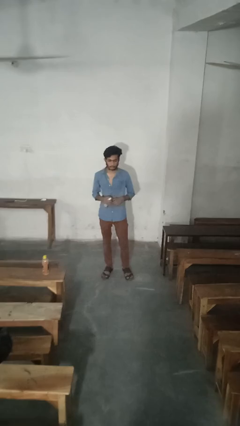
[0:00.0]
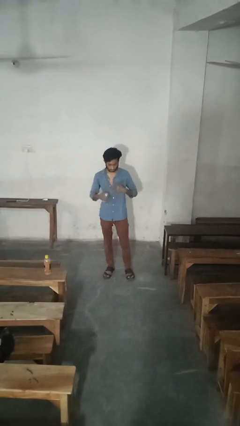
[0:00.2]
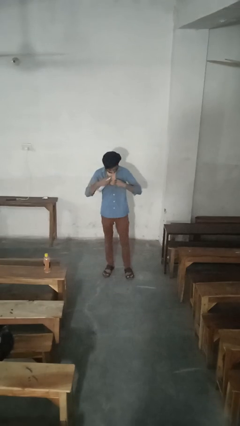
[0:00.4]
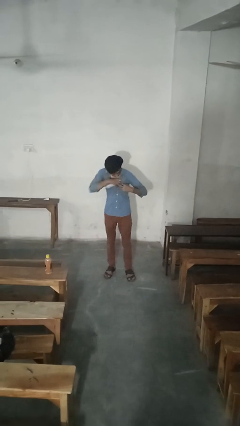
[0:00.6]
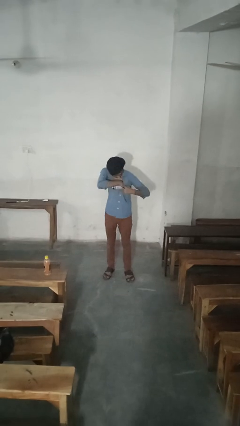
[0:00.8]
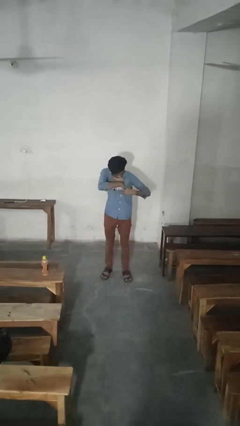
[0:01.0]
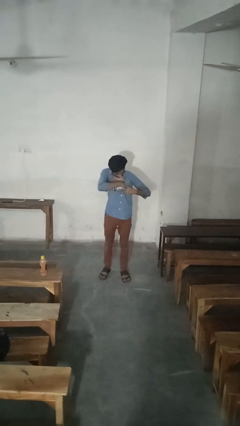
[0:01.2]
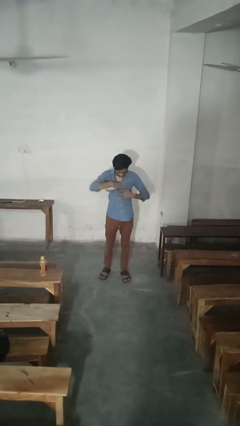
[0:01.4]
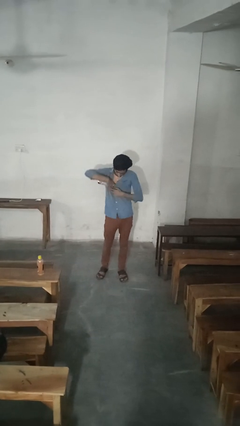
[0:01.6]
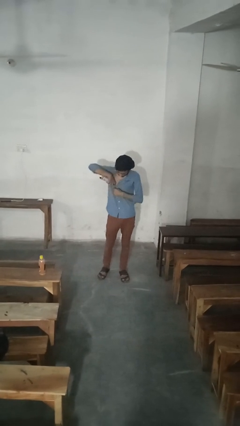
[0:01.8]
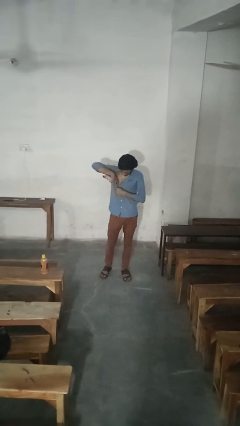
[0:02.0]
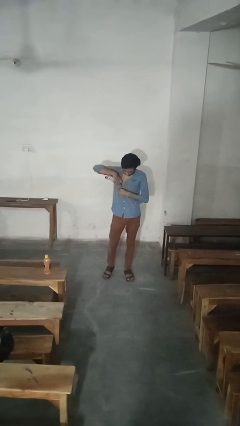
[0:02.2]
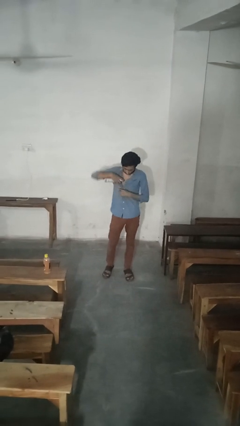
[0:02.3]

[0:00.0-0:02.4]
person applies deodorant

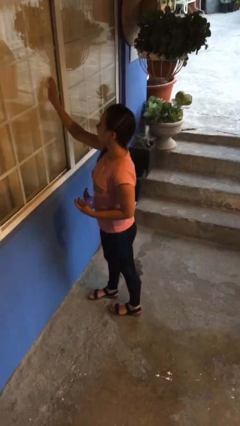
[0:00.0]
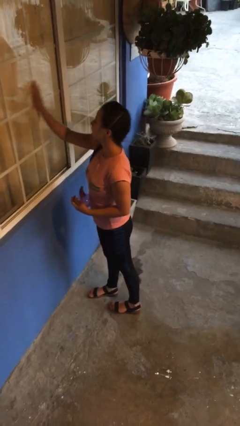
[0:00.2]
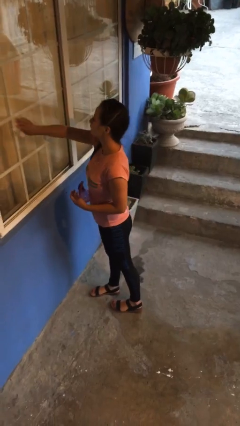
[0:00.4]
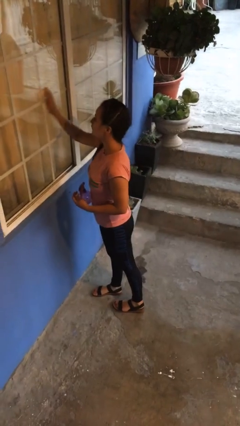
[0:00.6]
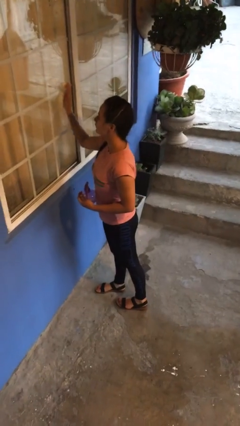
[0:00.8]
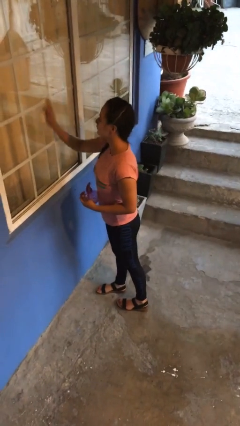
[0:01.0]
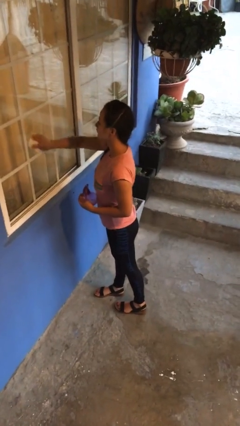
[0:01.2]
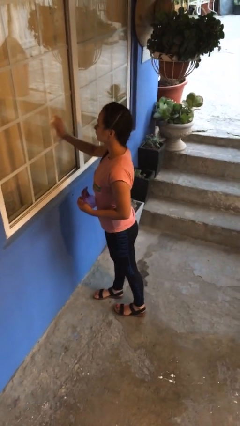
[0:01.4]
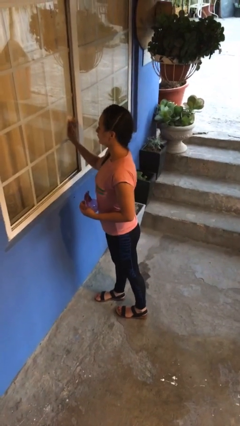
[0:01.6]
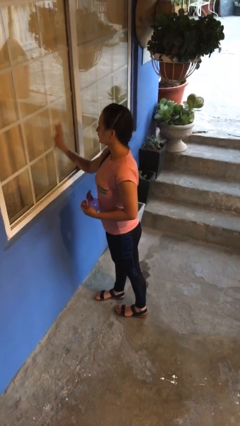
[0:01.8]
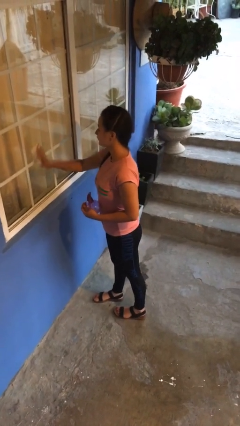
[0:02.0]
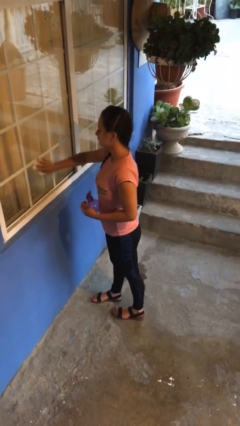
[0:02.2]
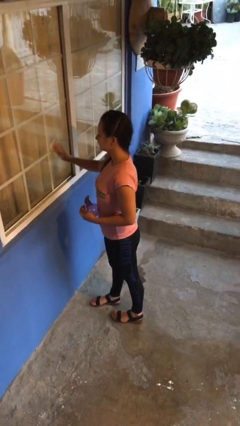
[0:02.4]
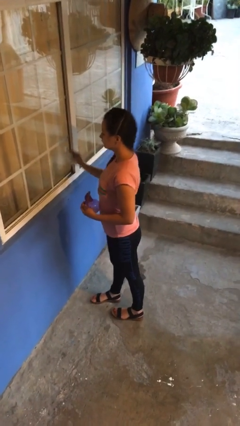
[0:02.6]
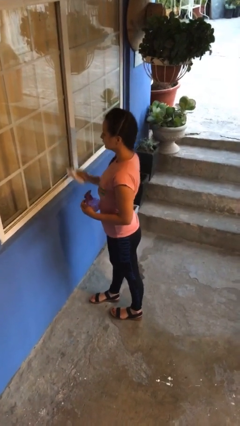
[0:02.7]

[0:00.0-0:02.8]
person washes window

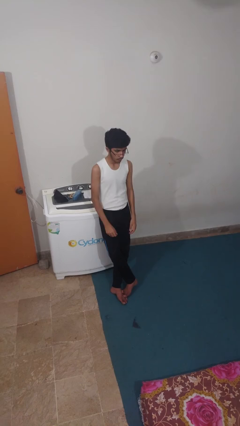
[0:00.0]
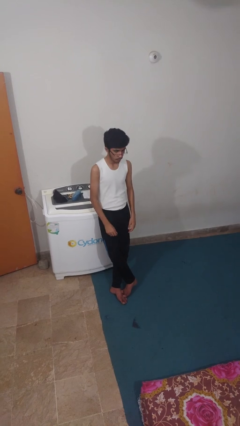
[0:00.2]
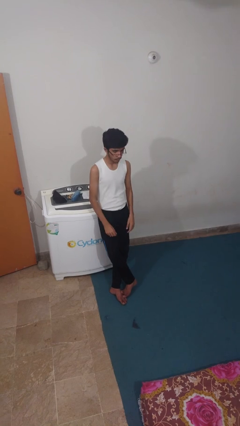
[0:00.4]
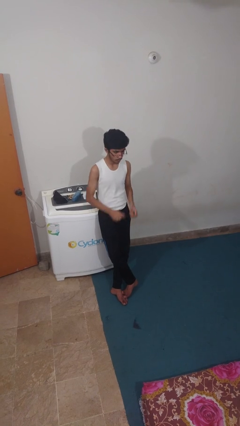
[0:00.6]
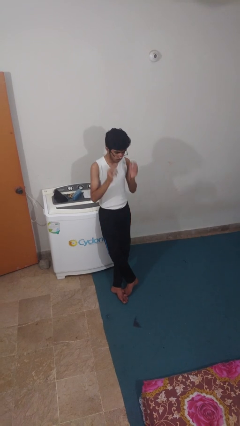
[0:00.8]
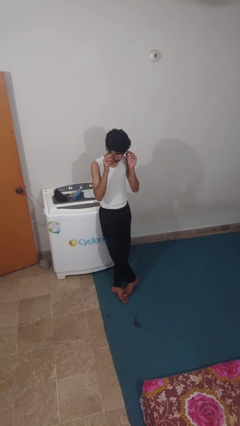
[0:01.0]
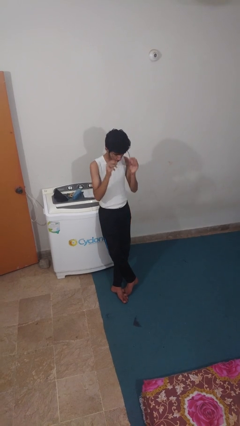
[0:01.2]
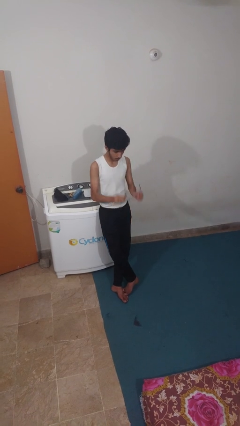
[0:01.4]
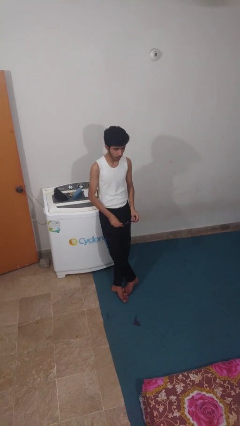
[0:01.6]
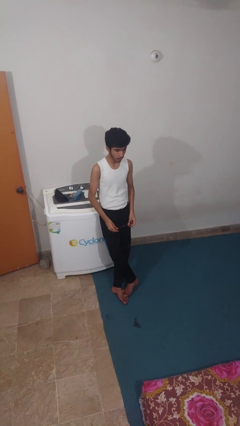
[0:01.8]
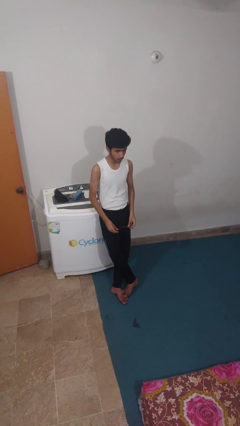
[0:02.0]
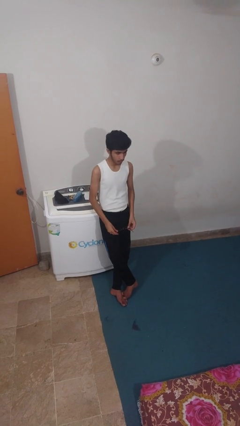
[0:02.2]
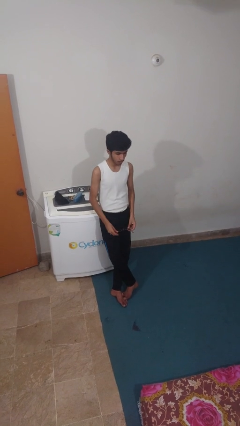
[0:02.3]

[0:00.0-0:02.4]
person takes off glasses

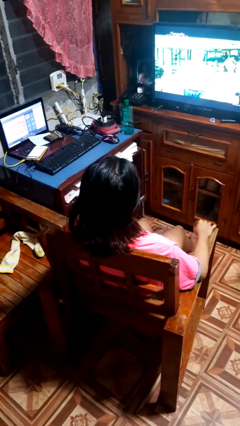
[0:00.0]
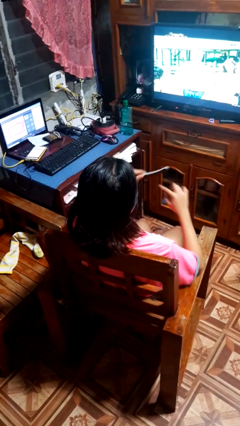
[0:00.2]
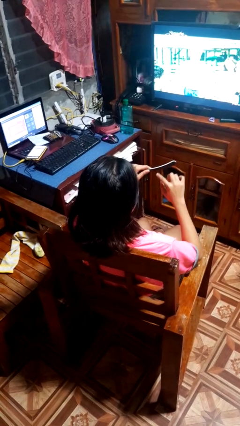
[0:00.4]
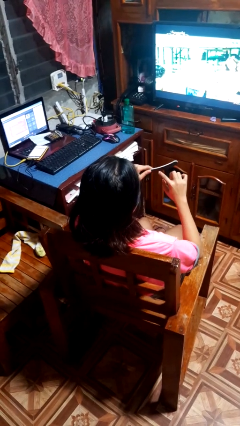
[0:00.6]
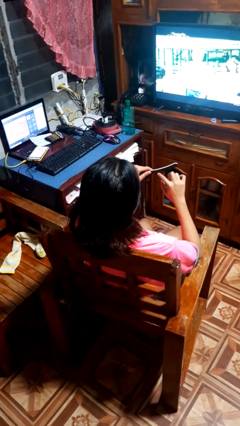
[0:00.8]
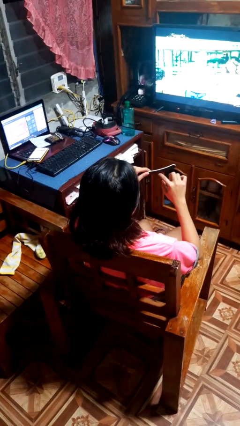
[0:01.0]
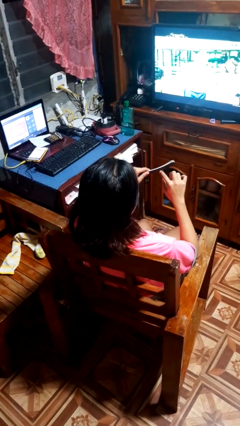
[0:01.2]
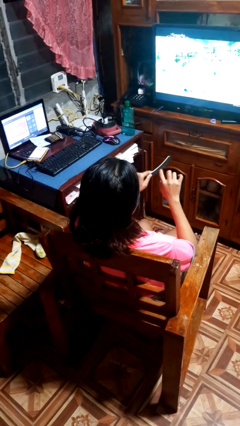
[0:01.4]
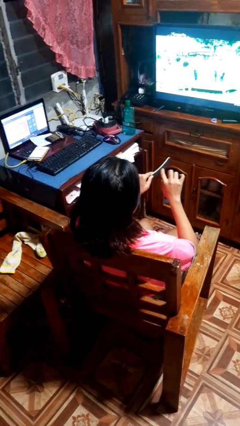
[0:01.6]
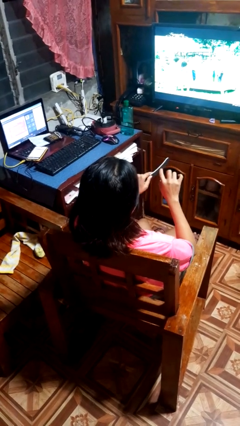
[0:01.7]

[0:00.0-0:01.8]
person files fingernails

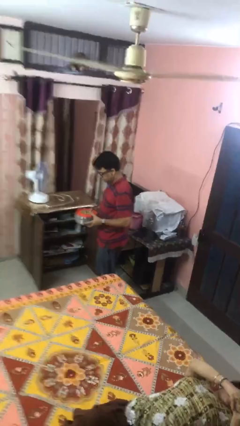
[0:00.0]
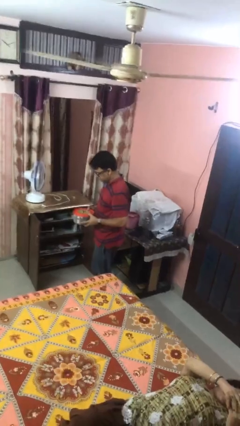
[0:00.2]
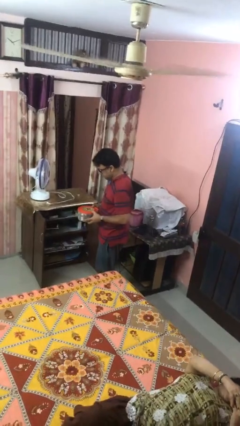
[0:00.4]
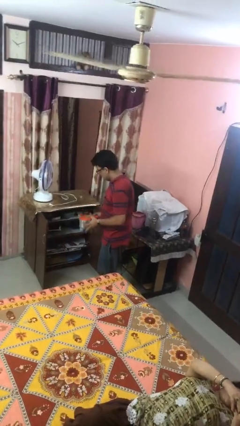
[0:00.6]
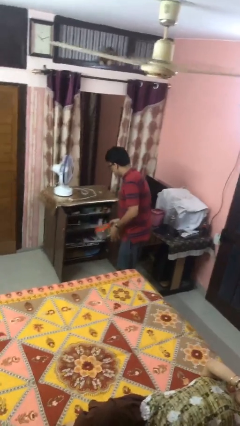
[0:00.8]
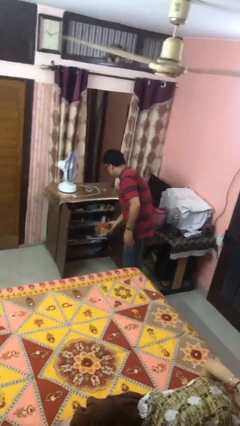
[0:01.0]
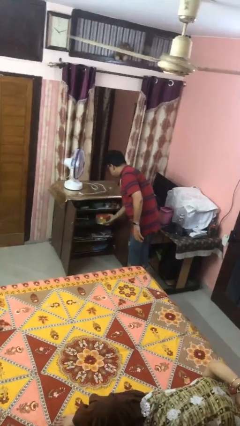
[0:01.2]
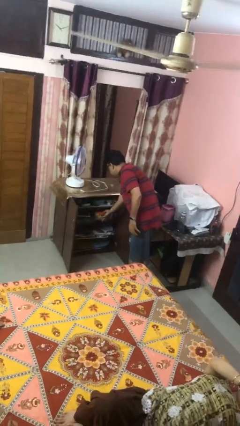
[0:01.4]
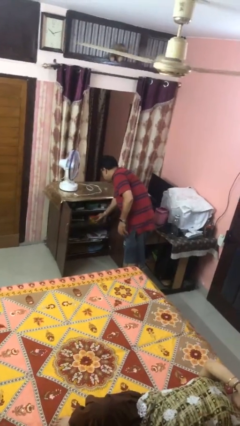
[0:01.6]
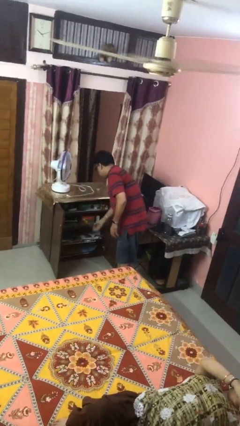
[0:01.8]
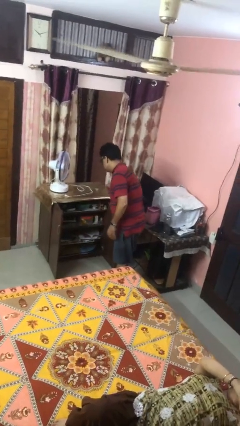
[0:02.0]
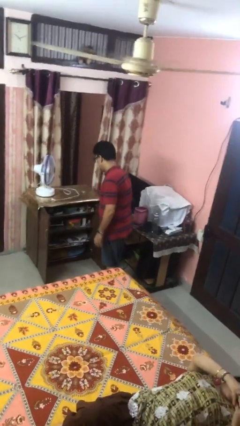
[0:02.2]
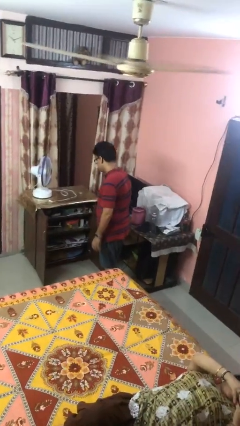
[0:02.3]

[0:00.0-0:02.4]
person puts down object into cabinet

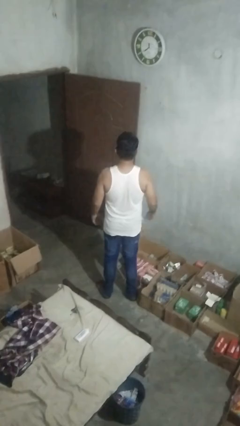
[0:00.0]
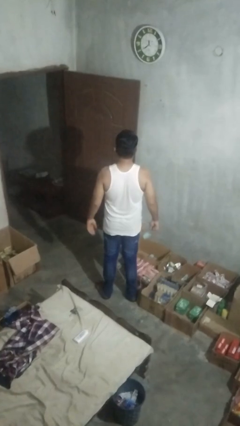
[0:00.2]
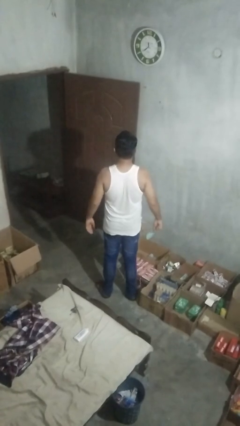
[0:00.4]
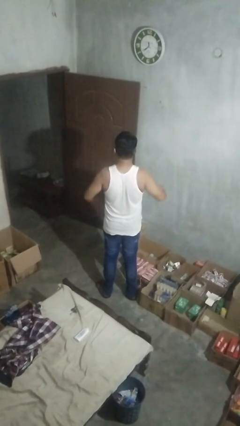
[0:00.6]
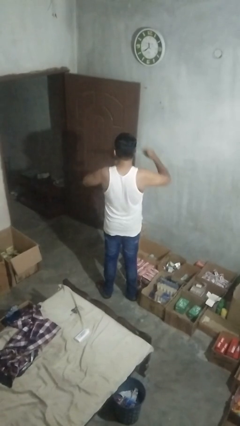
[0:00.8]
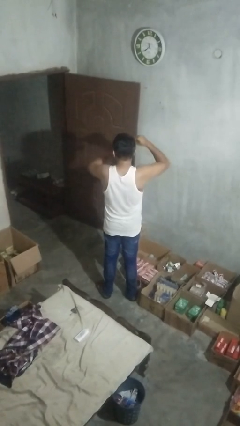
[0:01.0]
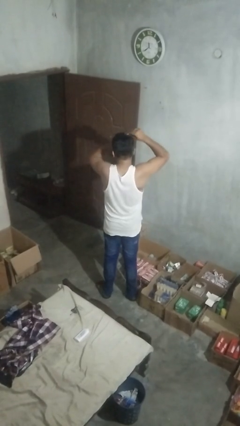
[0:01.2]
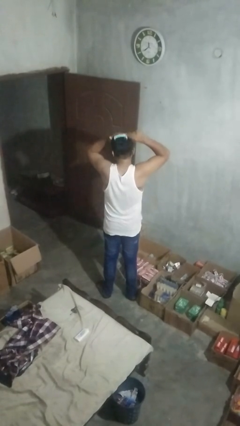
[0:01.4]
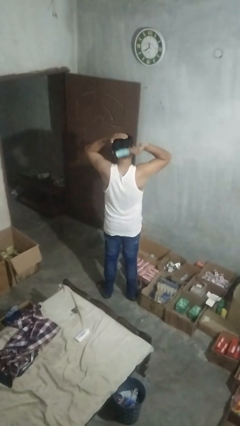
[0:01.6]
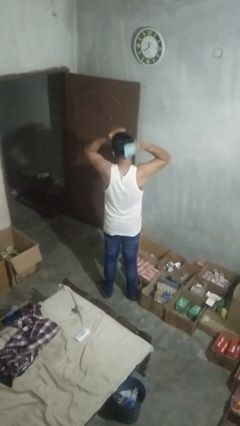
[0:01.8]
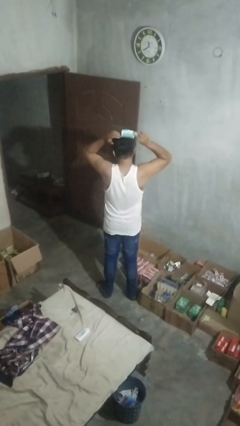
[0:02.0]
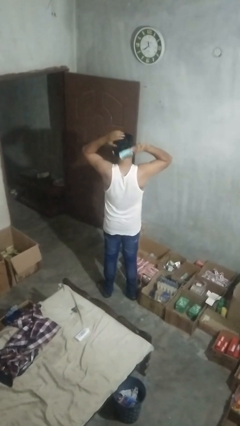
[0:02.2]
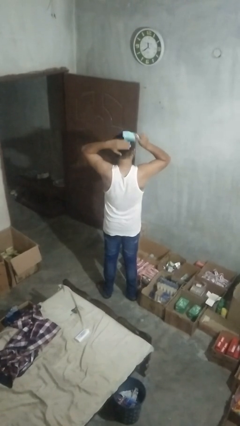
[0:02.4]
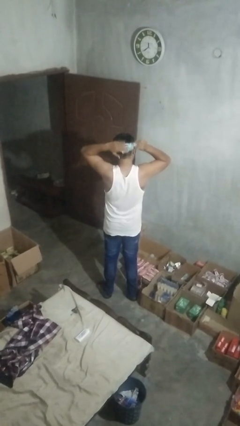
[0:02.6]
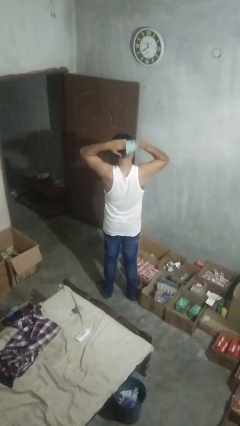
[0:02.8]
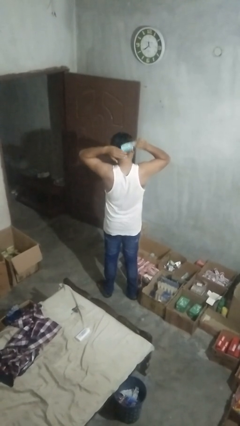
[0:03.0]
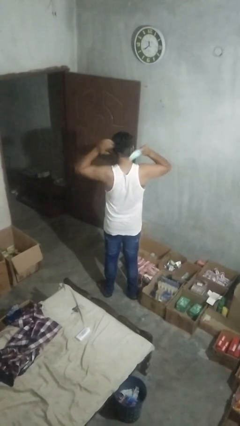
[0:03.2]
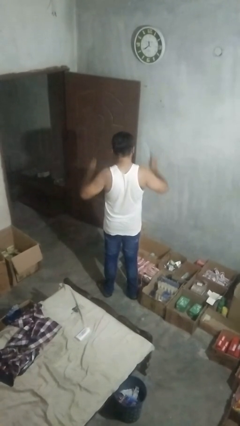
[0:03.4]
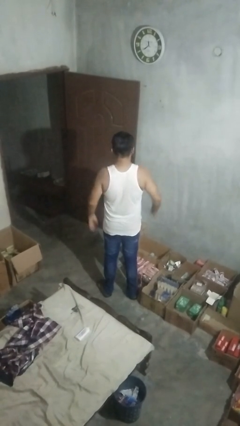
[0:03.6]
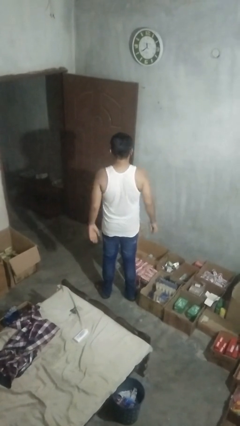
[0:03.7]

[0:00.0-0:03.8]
person brushes hair

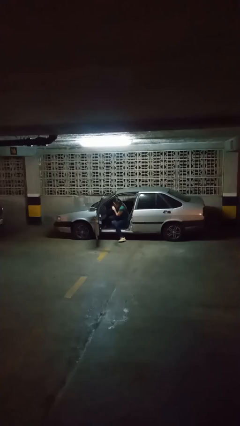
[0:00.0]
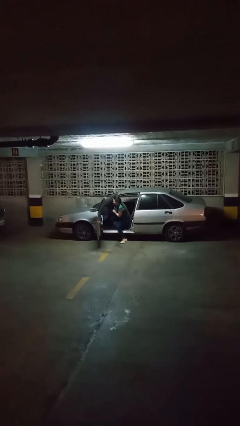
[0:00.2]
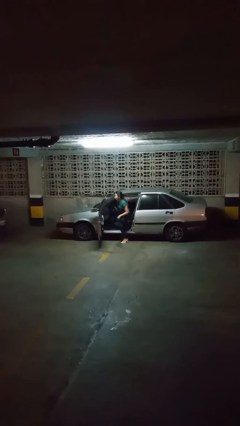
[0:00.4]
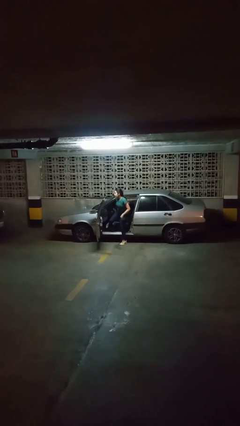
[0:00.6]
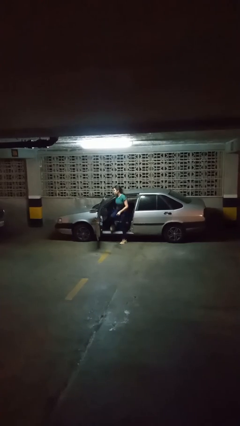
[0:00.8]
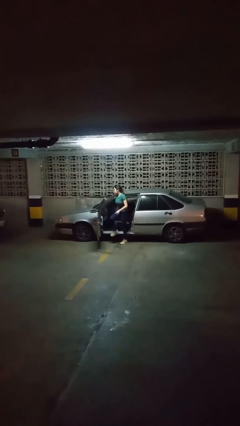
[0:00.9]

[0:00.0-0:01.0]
person exits car

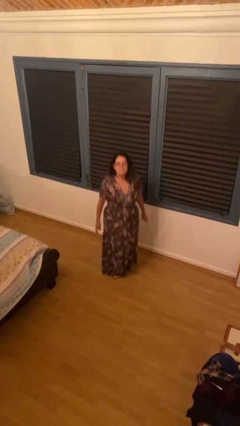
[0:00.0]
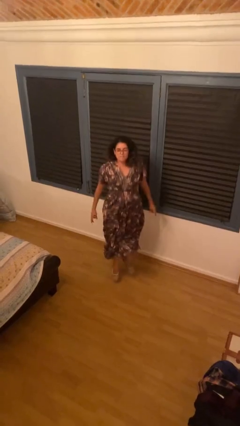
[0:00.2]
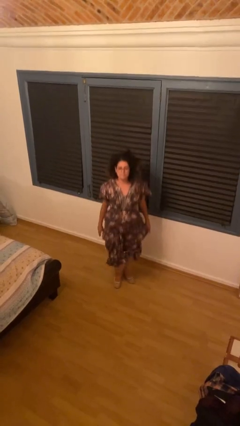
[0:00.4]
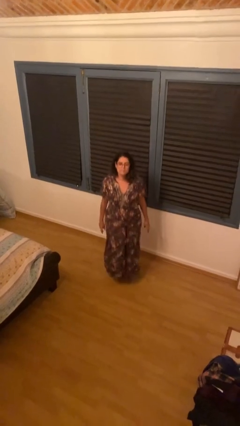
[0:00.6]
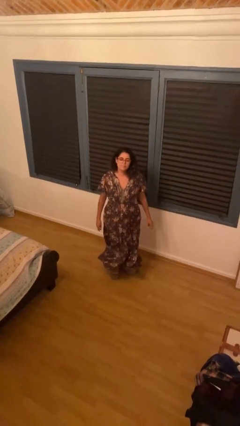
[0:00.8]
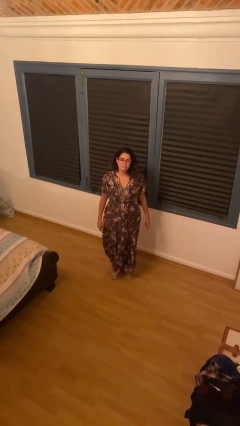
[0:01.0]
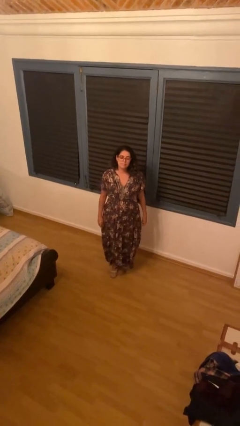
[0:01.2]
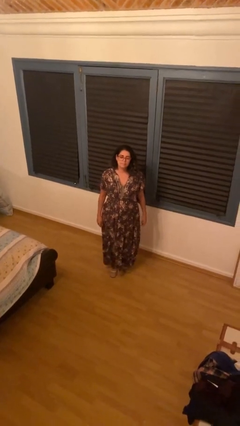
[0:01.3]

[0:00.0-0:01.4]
person jumps
